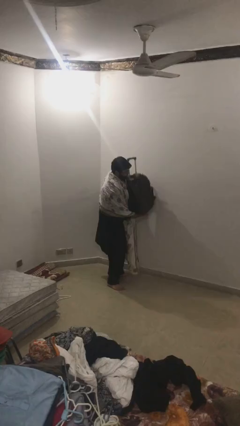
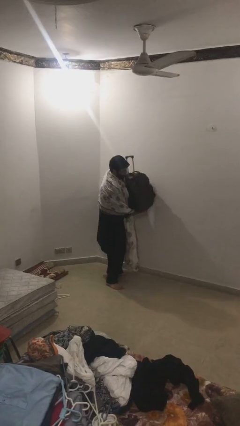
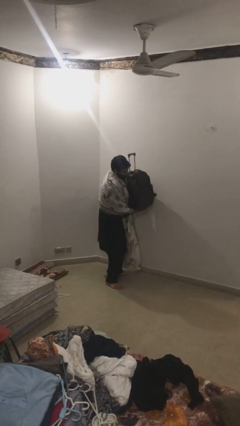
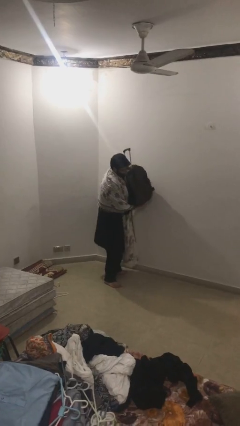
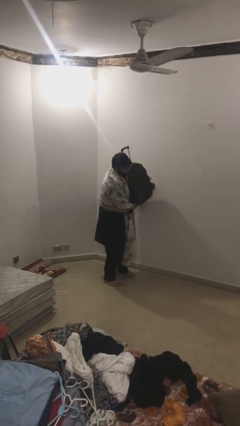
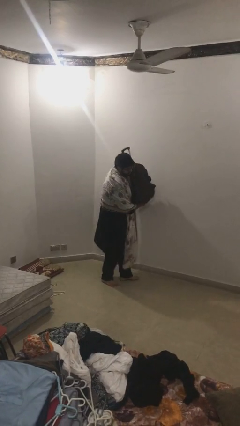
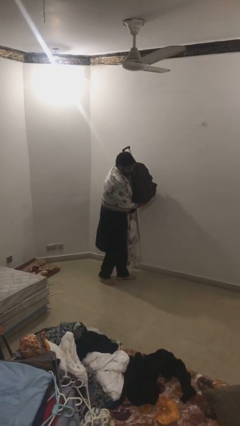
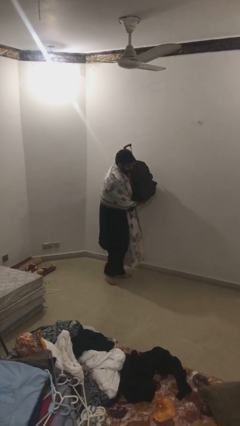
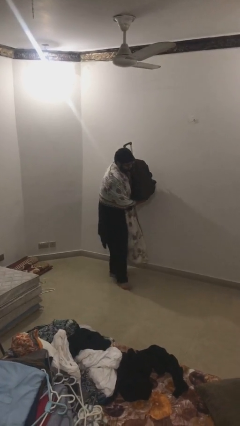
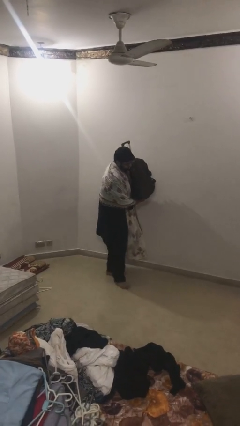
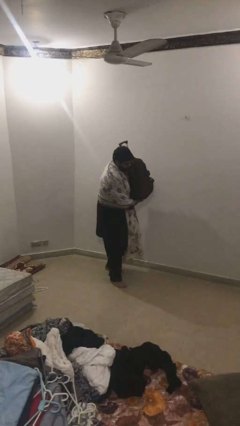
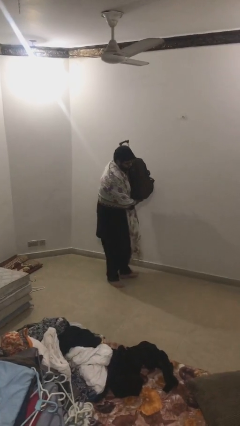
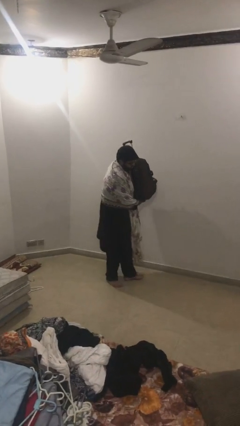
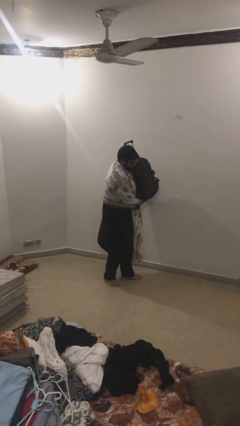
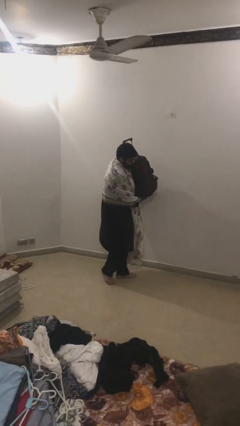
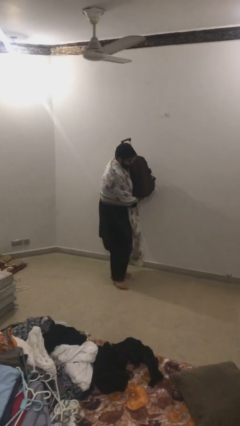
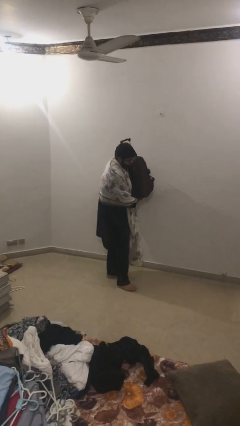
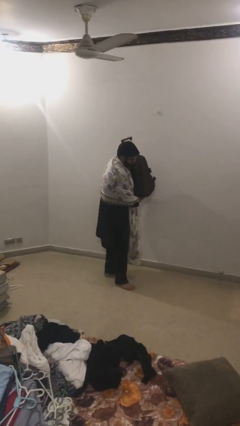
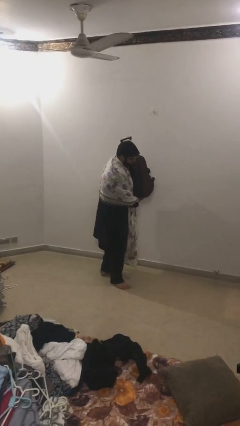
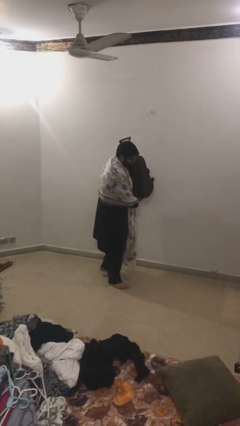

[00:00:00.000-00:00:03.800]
person carries heavy object

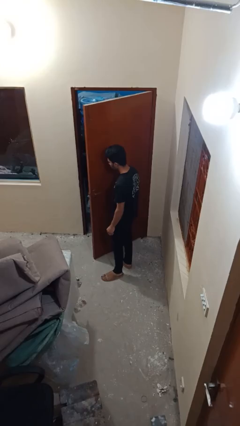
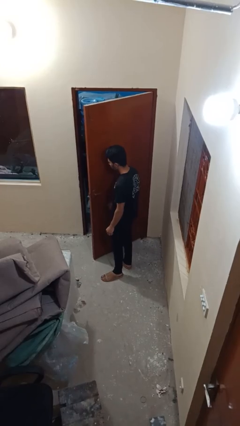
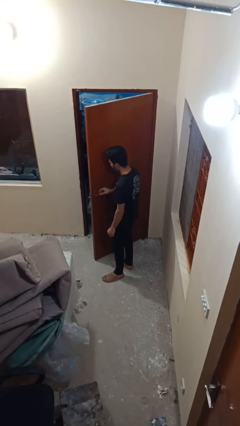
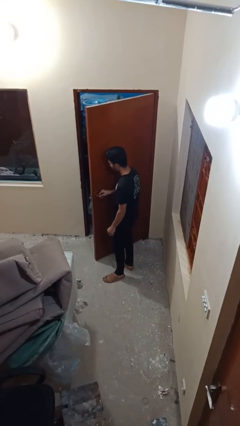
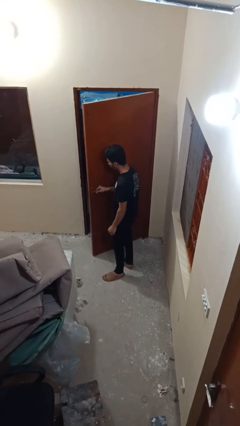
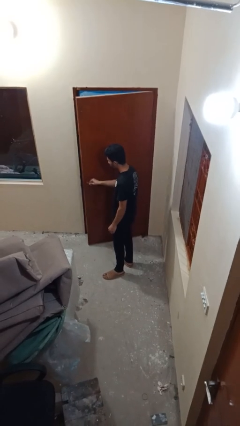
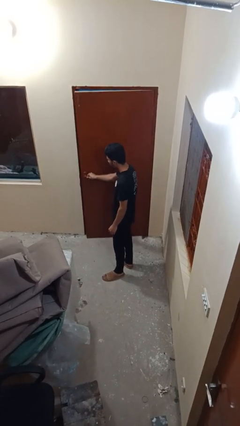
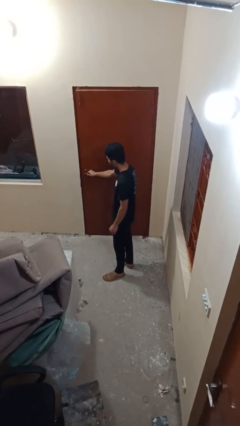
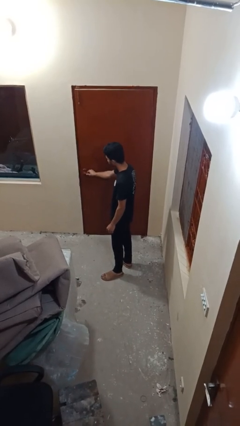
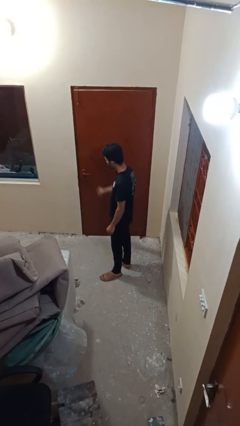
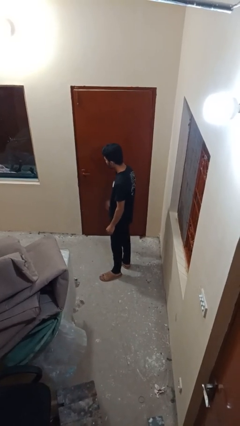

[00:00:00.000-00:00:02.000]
person closes facility door

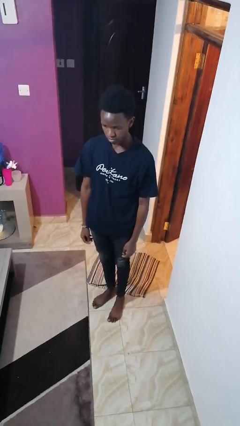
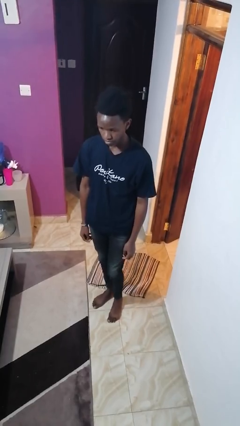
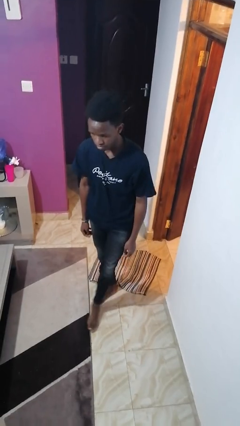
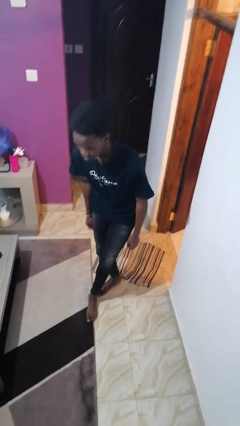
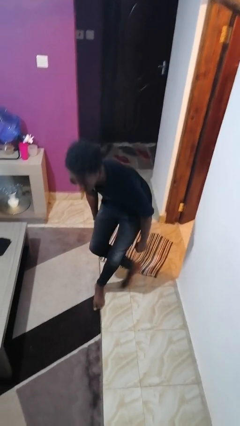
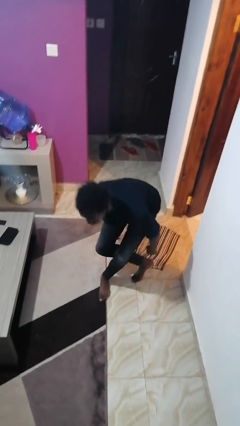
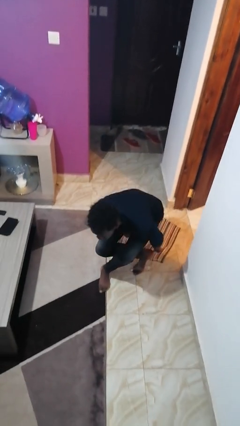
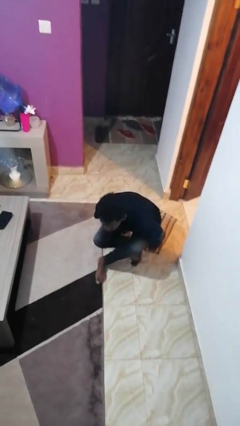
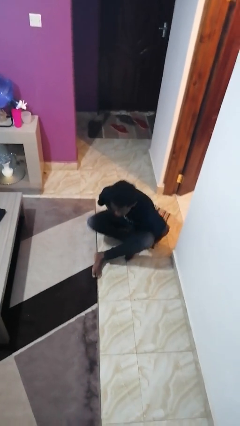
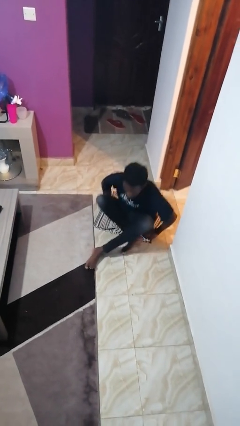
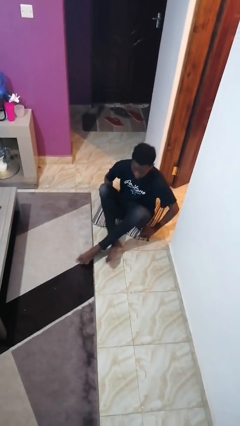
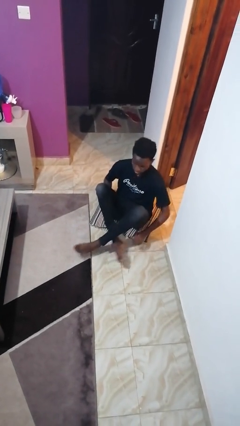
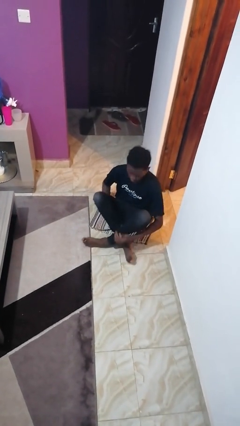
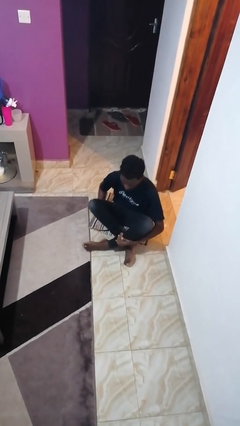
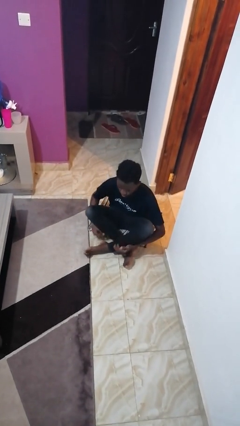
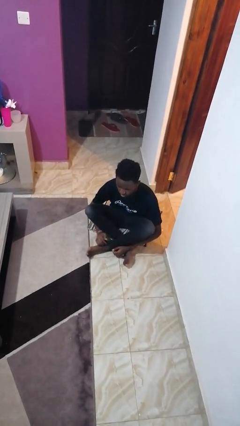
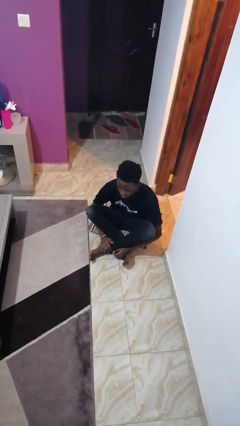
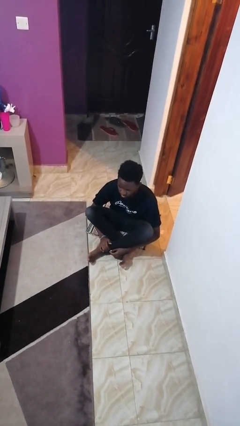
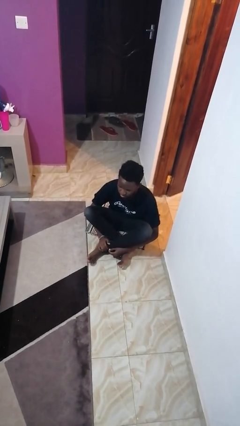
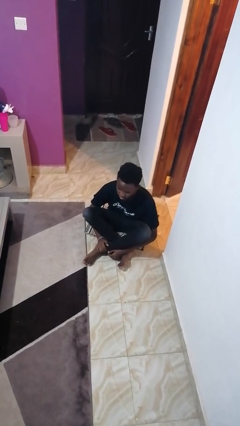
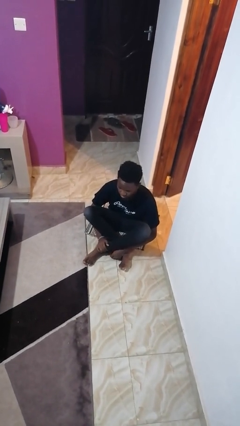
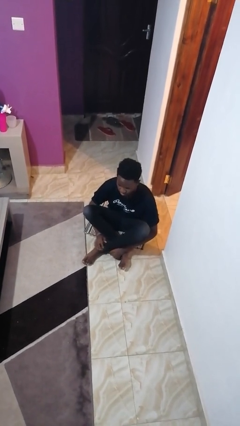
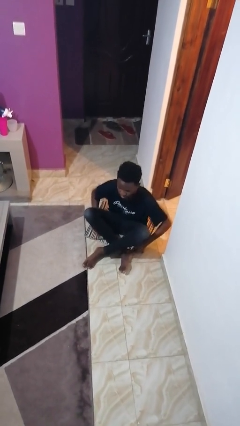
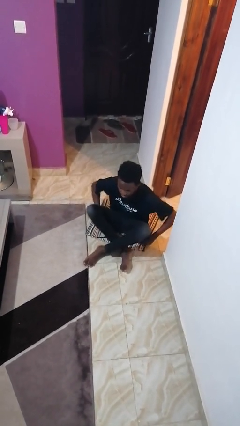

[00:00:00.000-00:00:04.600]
person sits crisscross

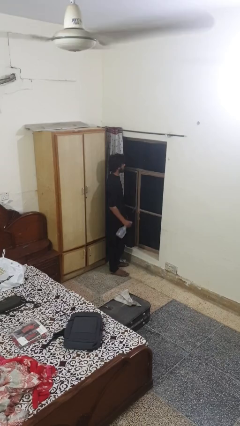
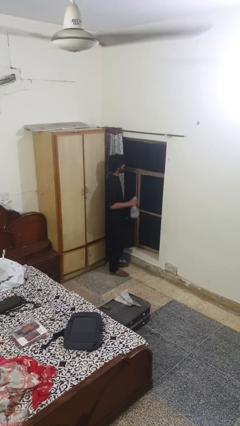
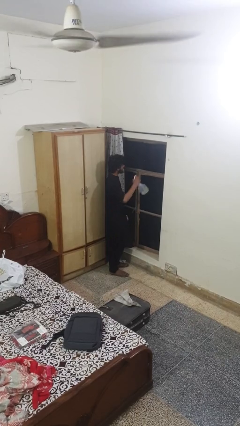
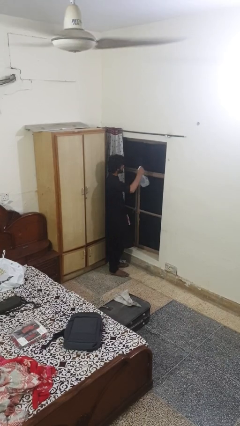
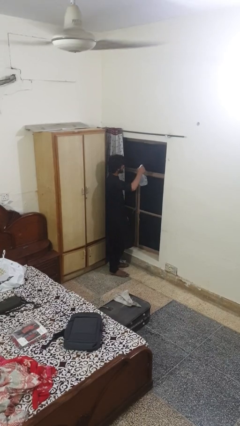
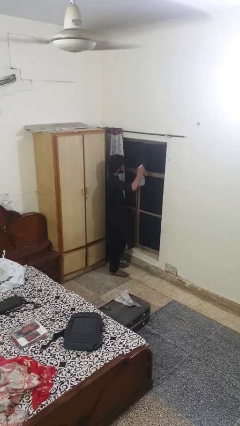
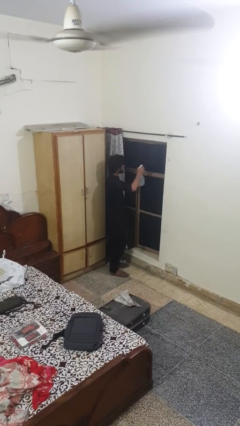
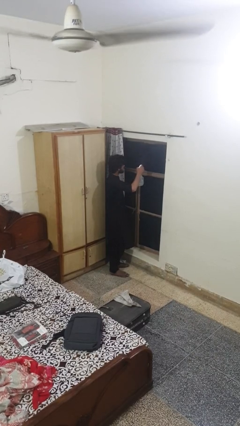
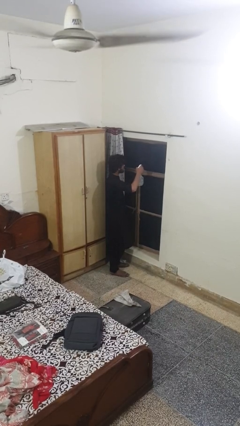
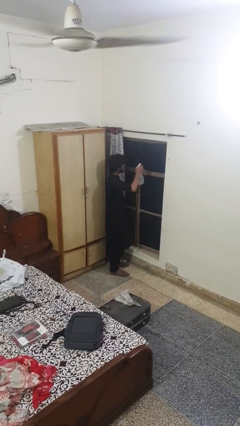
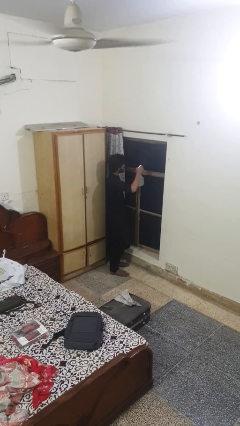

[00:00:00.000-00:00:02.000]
person sprays from bottle

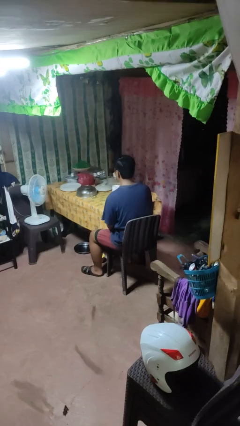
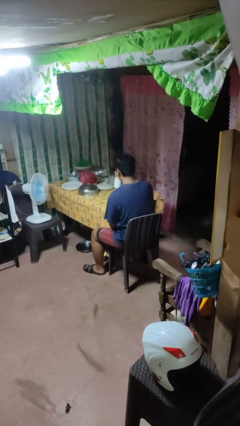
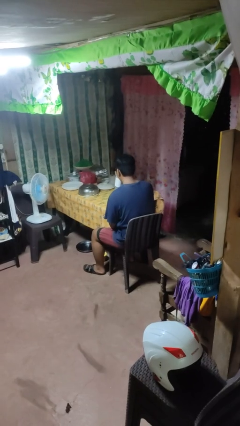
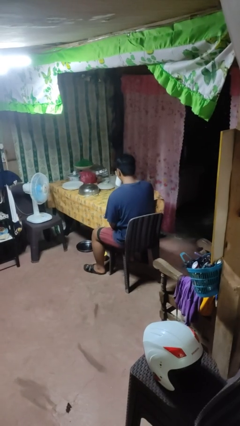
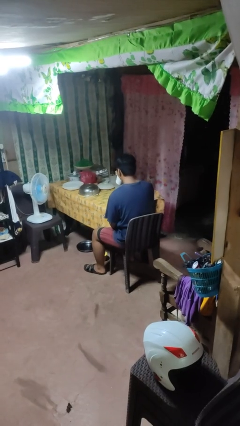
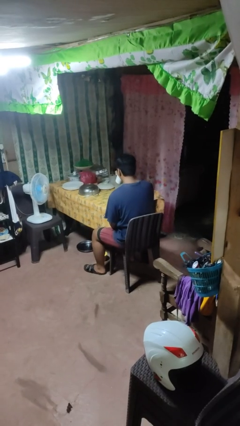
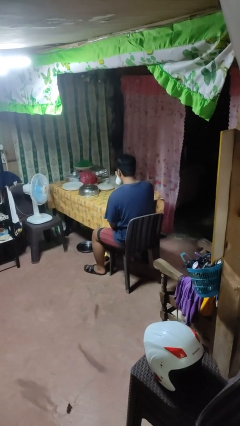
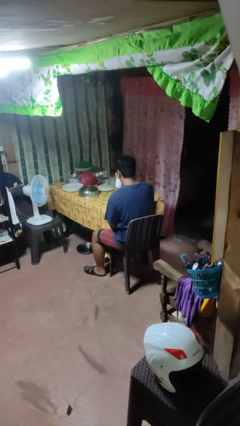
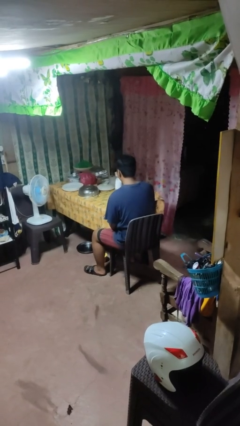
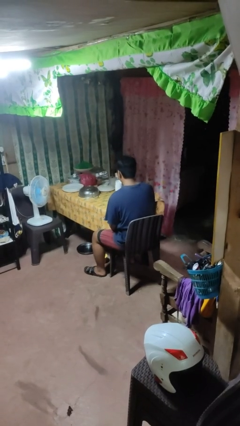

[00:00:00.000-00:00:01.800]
person drinks from mug

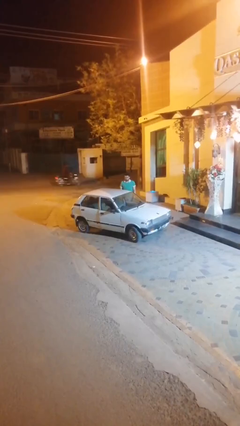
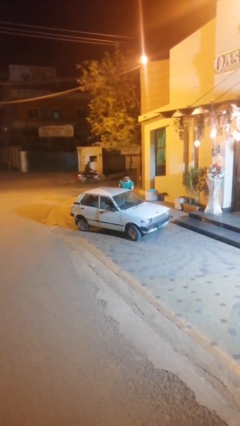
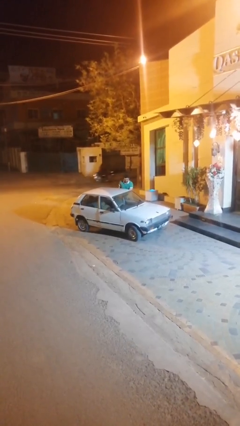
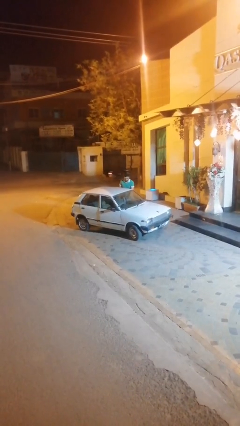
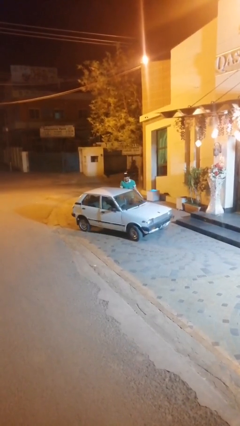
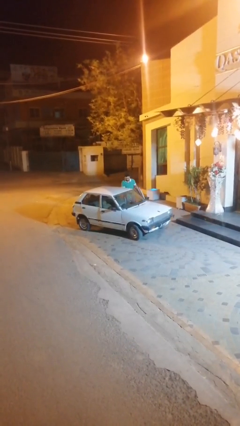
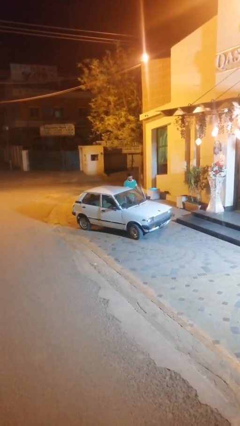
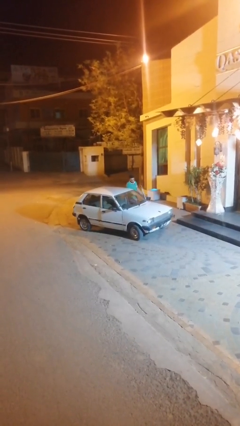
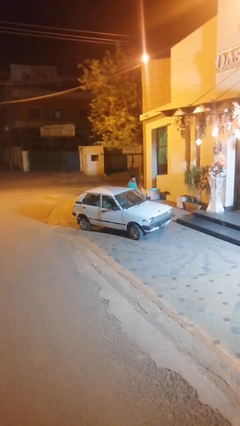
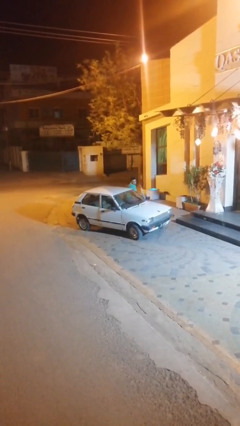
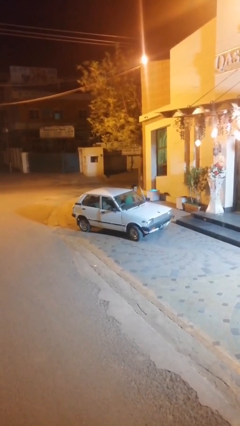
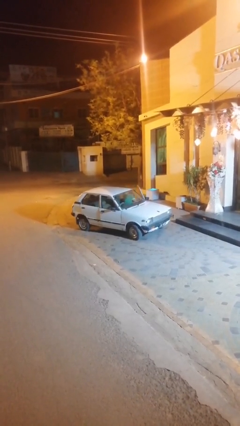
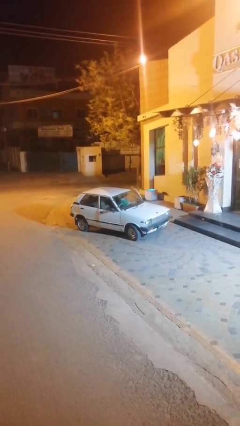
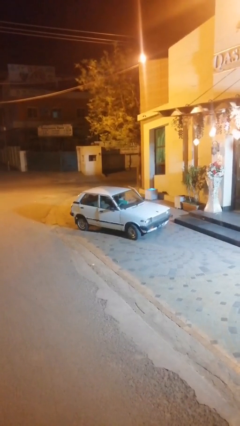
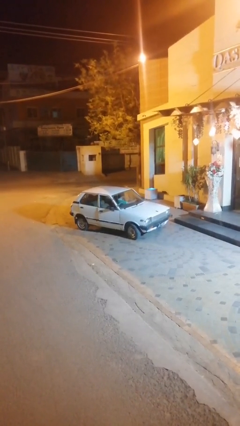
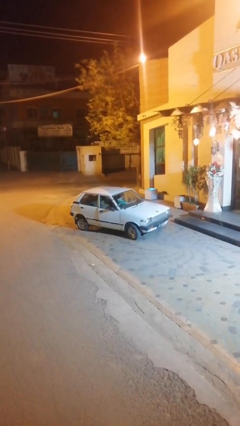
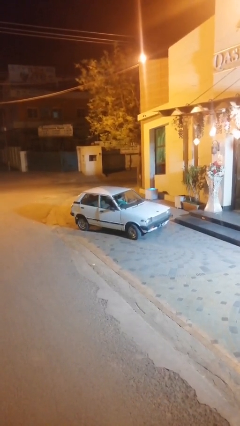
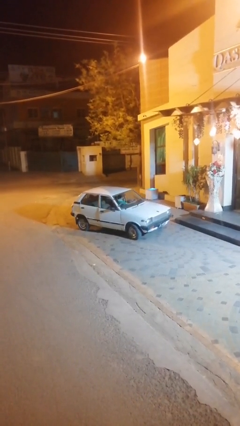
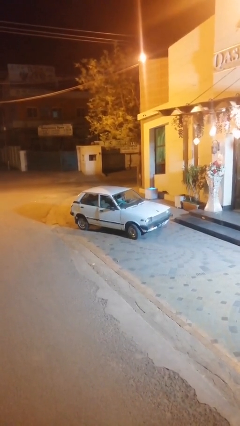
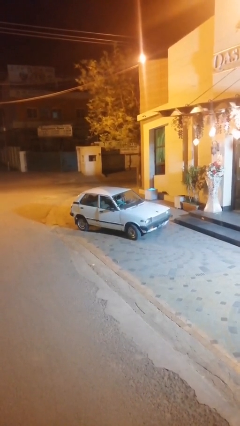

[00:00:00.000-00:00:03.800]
car picks up person
